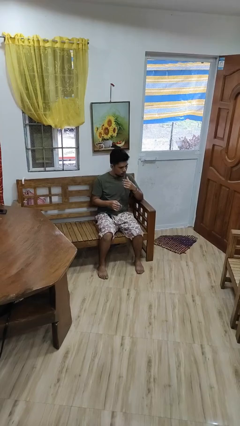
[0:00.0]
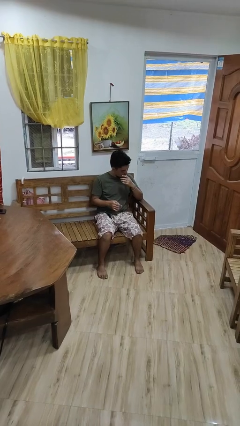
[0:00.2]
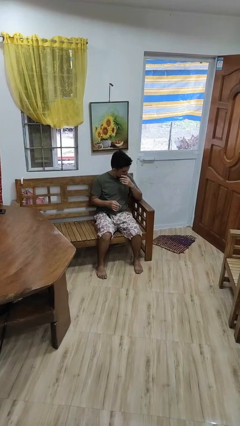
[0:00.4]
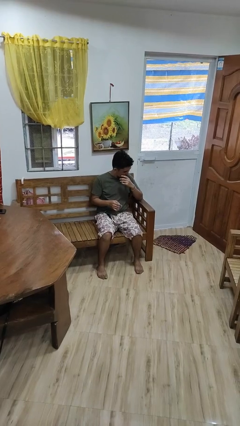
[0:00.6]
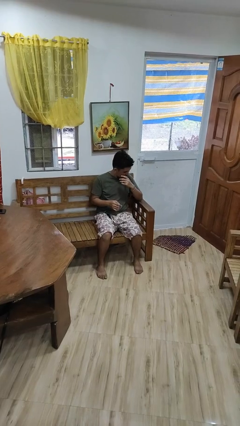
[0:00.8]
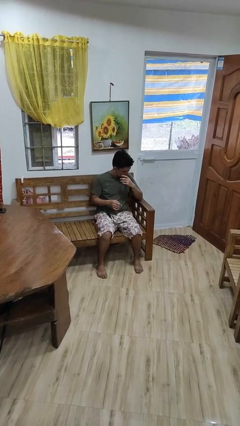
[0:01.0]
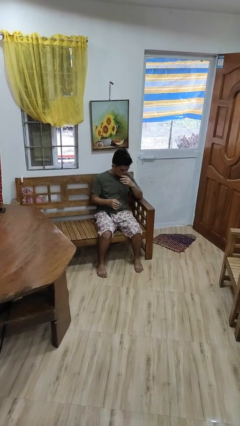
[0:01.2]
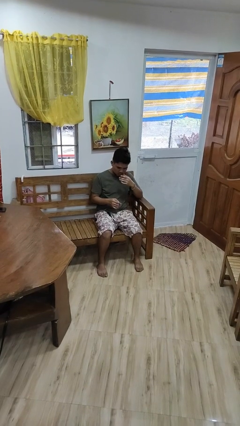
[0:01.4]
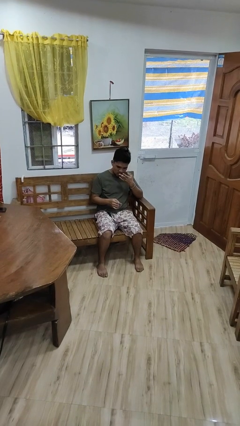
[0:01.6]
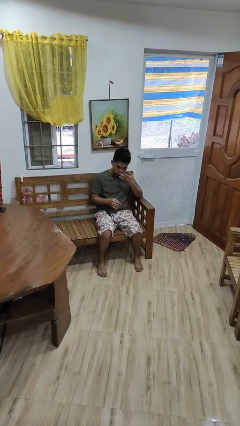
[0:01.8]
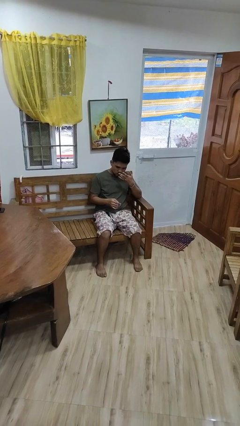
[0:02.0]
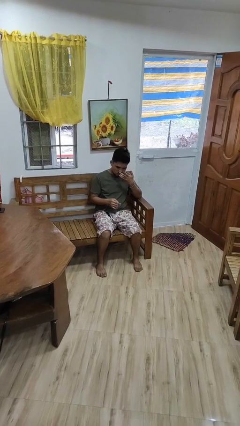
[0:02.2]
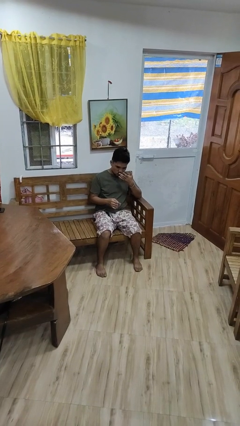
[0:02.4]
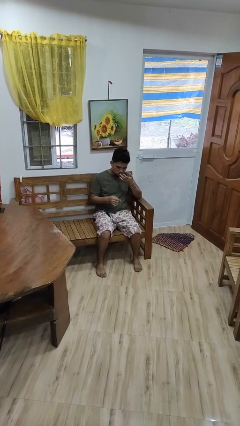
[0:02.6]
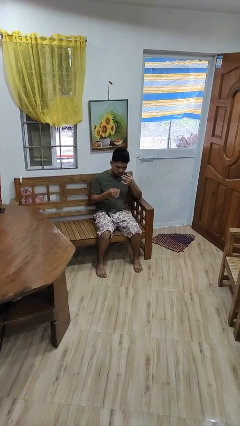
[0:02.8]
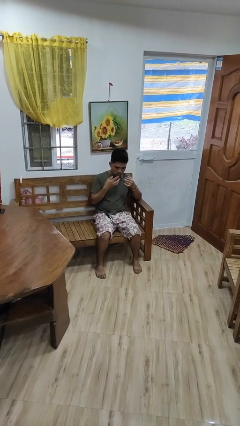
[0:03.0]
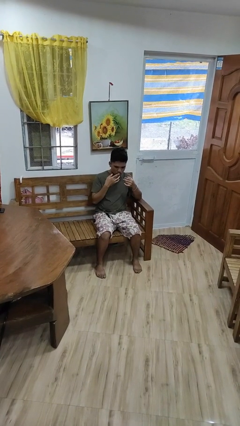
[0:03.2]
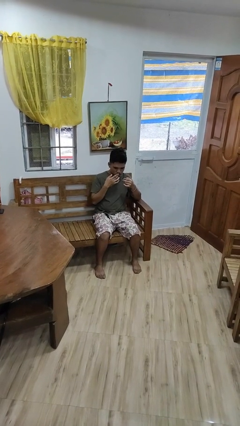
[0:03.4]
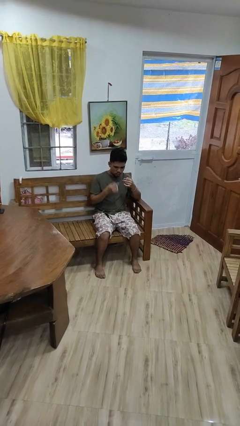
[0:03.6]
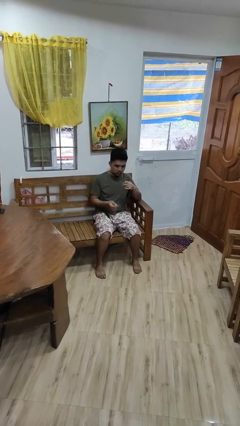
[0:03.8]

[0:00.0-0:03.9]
person licks fingers

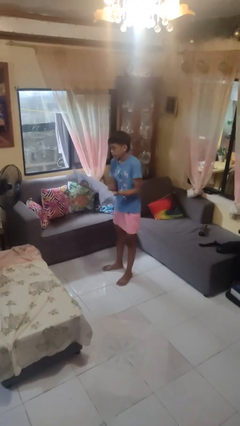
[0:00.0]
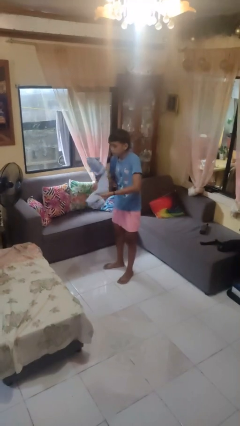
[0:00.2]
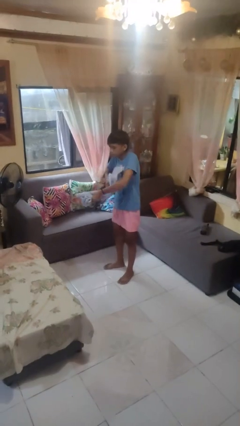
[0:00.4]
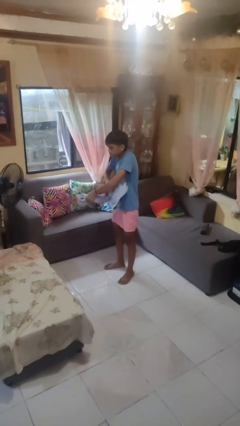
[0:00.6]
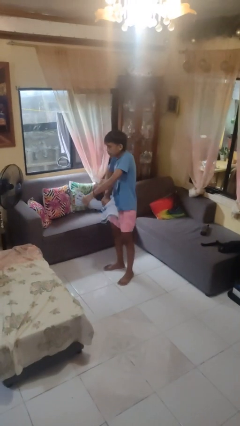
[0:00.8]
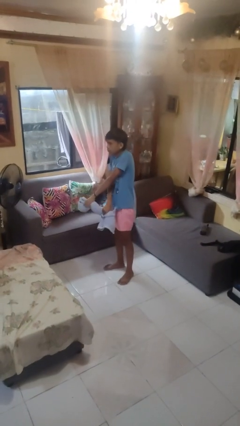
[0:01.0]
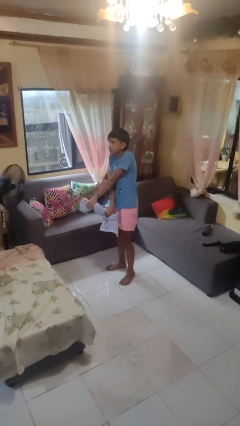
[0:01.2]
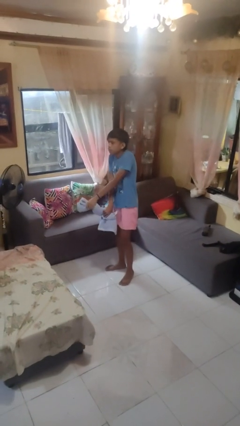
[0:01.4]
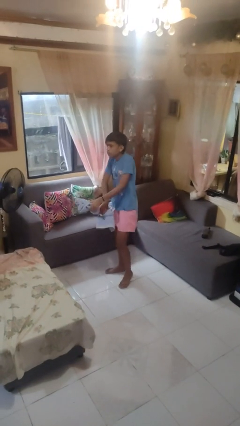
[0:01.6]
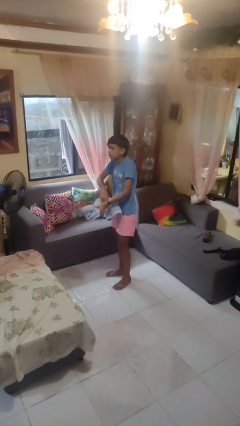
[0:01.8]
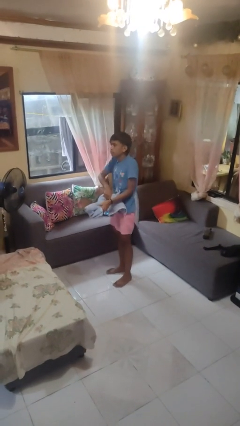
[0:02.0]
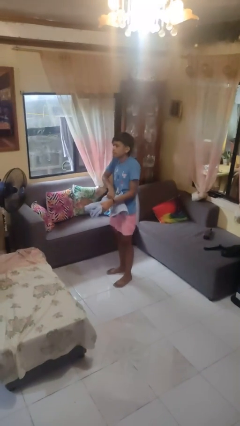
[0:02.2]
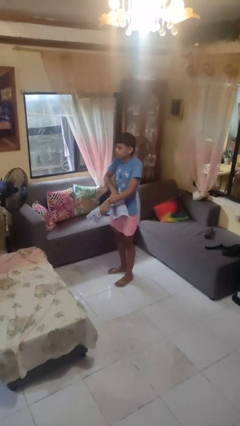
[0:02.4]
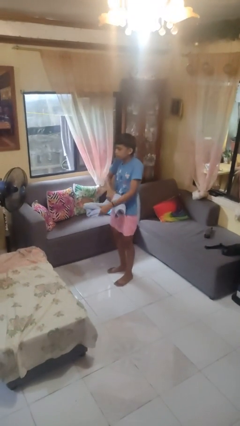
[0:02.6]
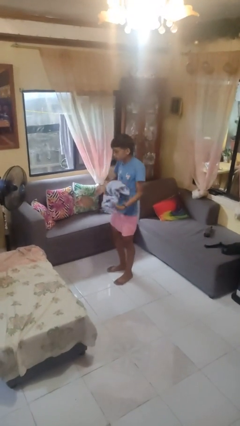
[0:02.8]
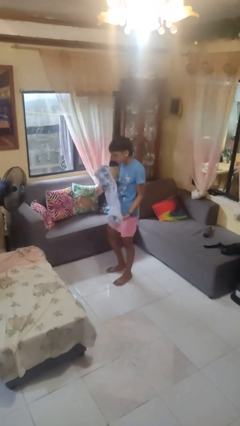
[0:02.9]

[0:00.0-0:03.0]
person squeezes object

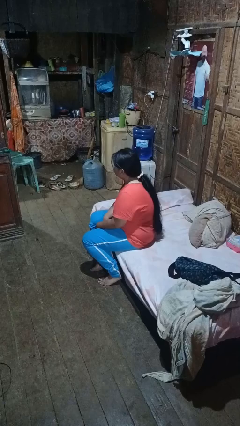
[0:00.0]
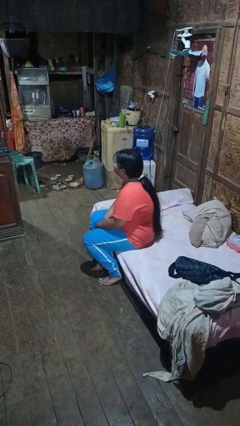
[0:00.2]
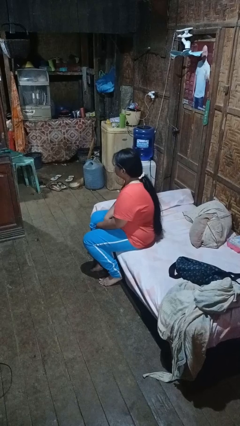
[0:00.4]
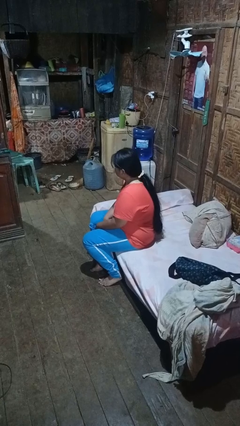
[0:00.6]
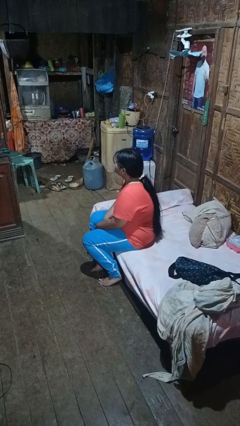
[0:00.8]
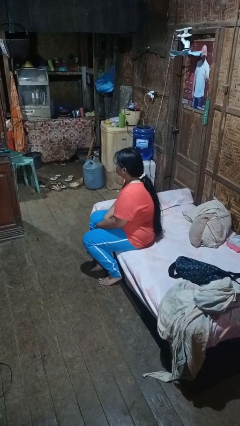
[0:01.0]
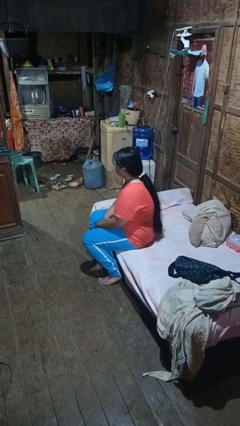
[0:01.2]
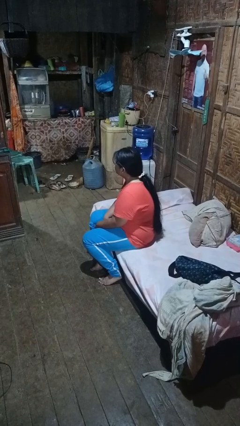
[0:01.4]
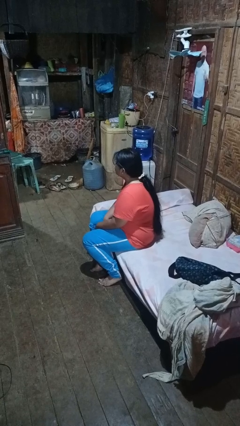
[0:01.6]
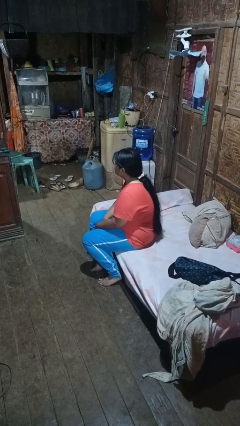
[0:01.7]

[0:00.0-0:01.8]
person nods head

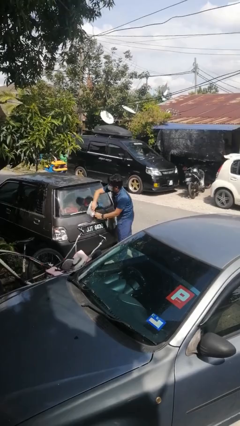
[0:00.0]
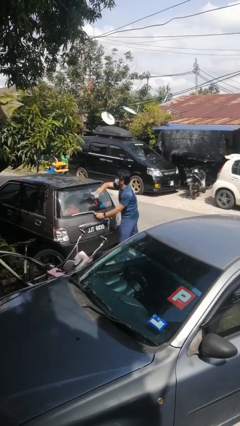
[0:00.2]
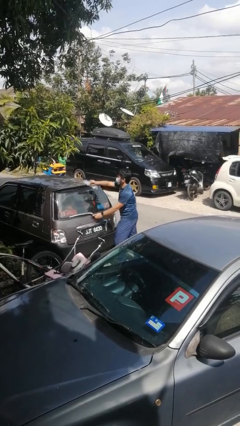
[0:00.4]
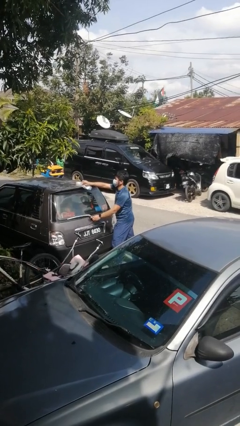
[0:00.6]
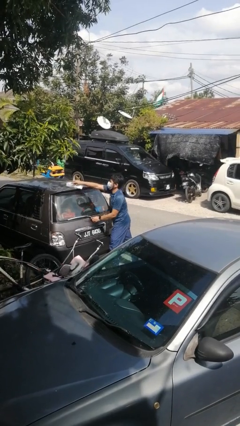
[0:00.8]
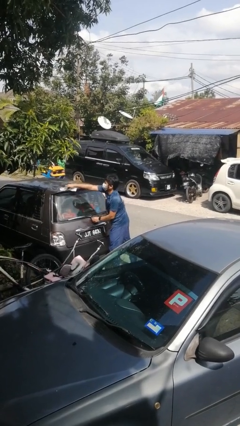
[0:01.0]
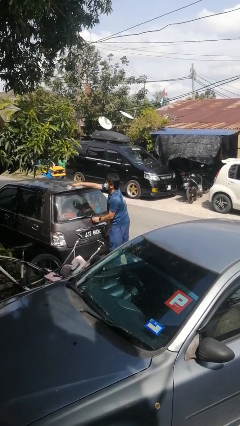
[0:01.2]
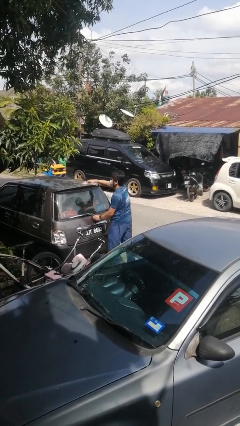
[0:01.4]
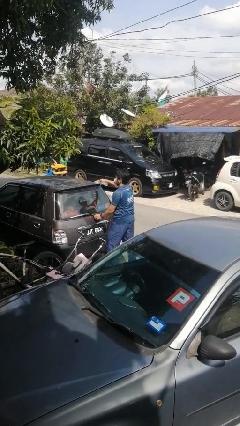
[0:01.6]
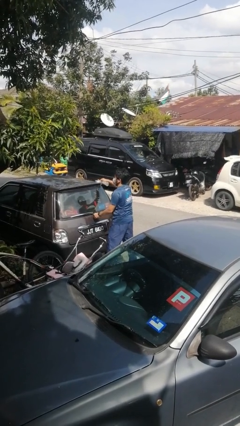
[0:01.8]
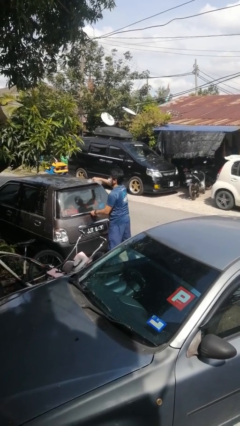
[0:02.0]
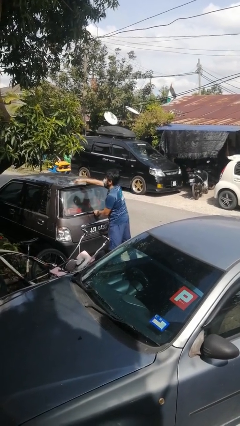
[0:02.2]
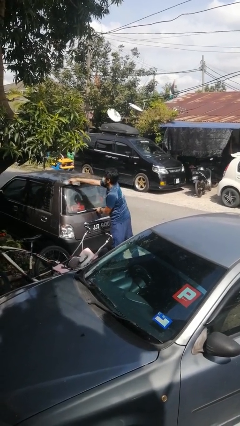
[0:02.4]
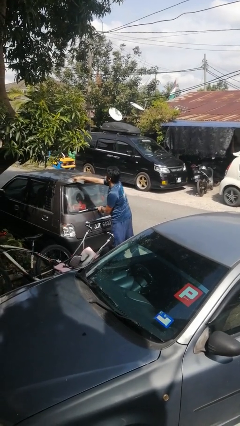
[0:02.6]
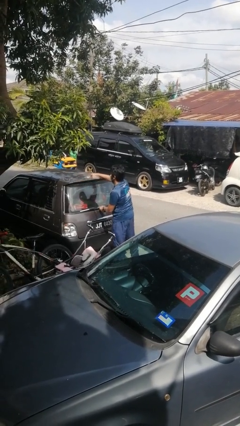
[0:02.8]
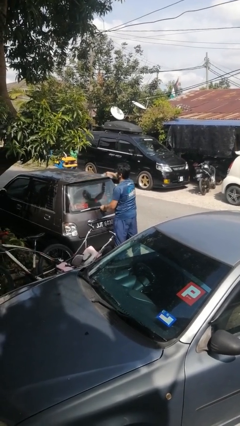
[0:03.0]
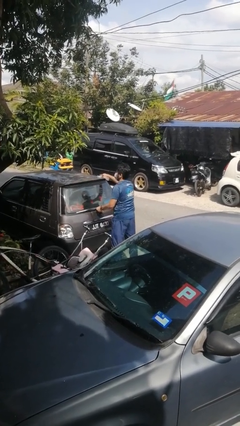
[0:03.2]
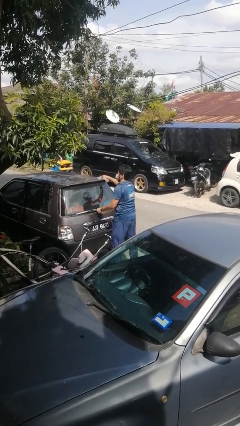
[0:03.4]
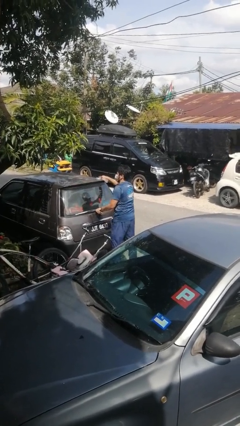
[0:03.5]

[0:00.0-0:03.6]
person polishes car with rag

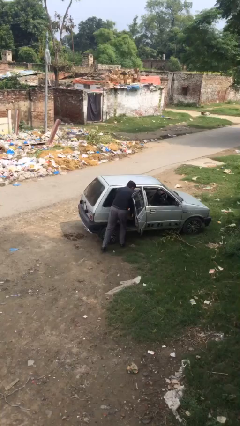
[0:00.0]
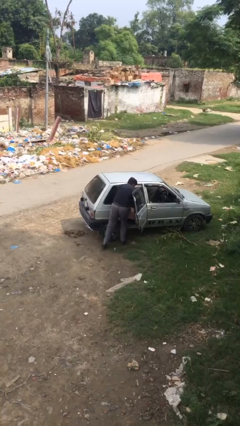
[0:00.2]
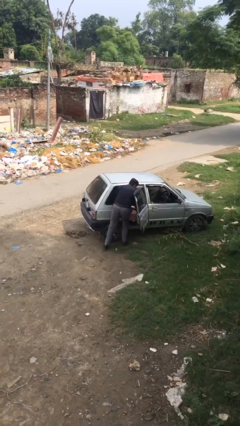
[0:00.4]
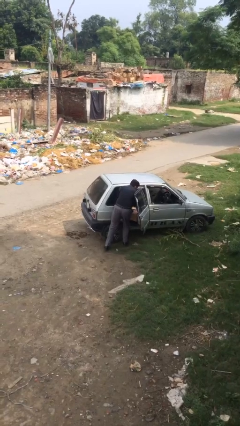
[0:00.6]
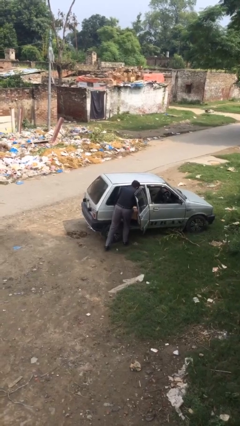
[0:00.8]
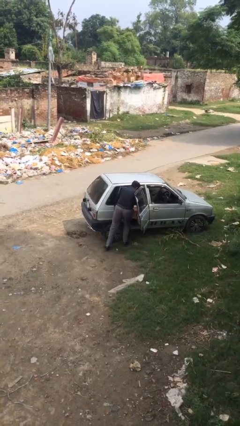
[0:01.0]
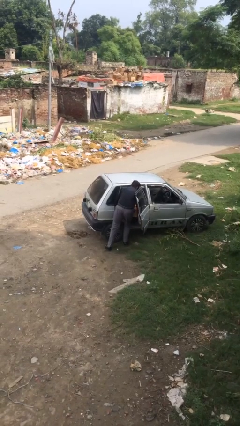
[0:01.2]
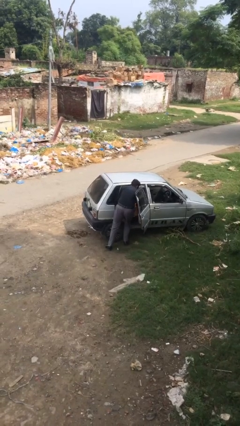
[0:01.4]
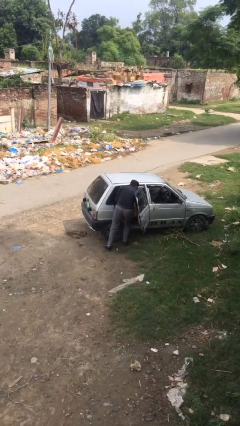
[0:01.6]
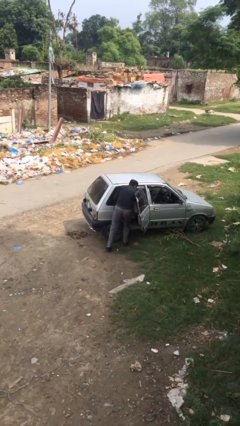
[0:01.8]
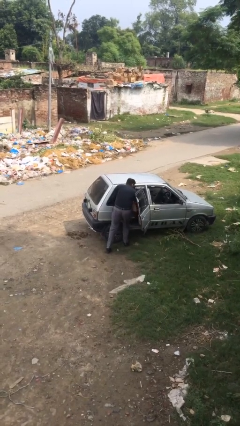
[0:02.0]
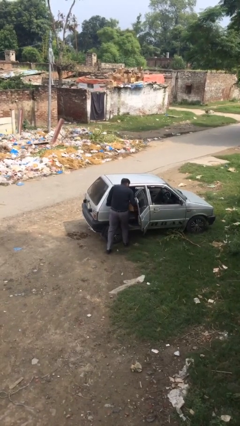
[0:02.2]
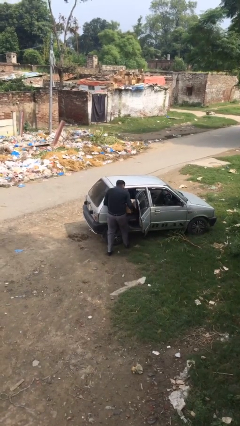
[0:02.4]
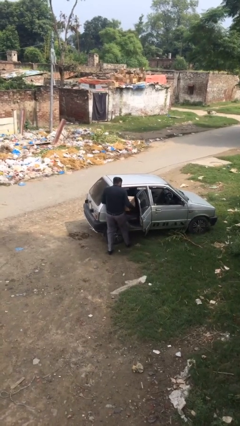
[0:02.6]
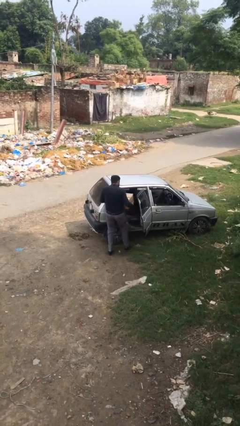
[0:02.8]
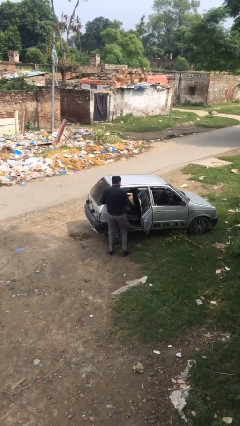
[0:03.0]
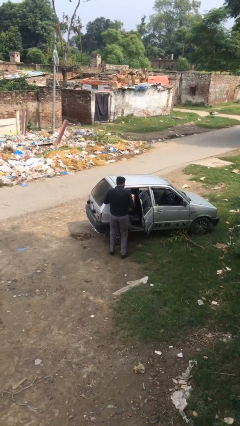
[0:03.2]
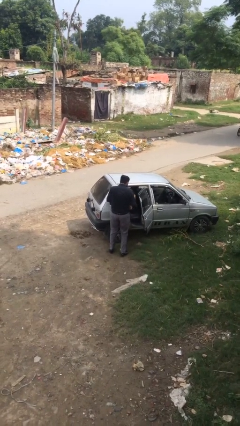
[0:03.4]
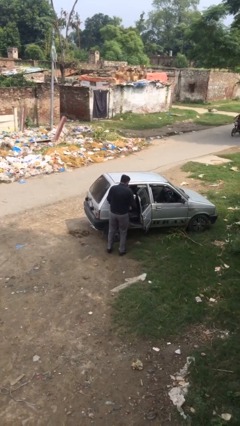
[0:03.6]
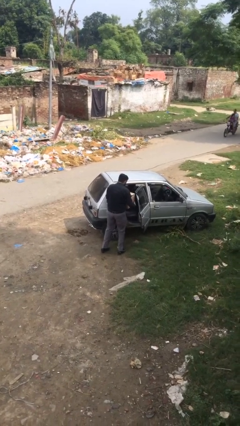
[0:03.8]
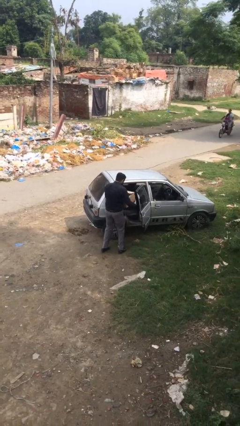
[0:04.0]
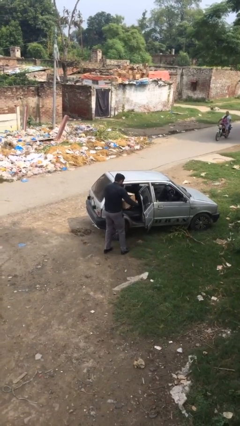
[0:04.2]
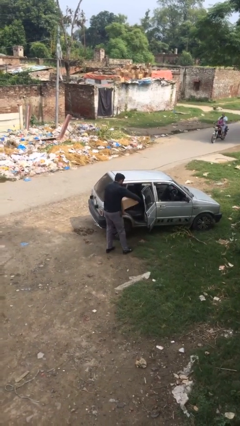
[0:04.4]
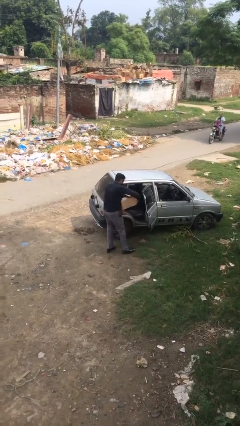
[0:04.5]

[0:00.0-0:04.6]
person unloads car

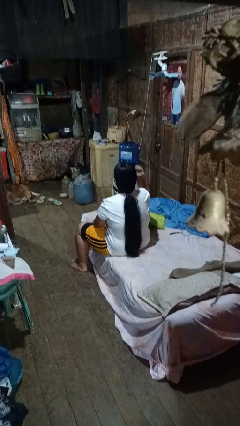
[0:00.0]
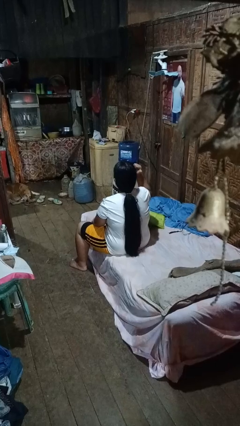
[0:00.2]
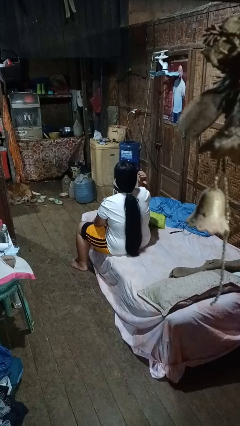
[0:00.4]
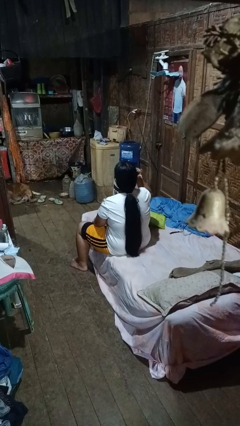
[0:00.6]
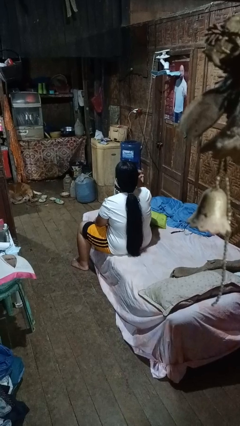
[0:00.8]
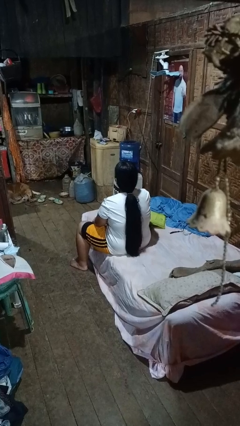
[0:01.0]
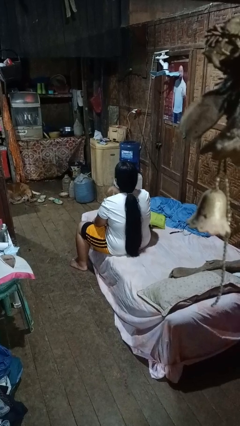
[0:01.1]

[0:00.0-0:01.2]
person gestures behind me
